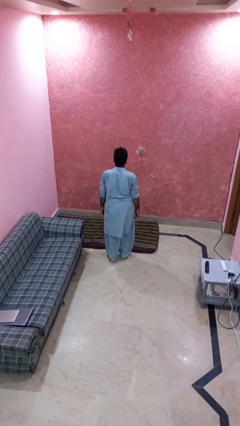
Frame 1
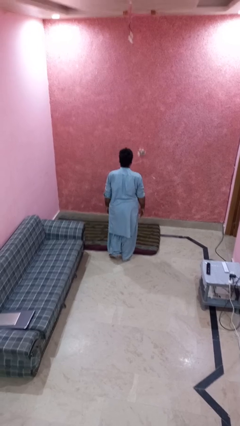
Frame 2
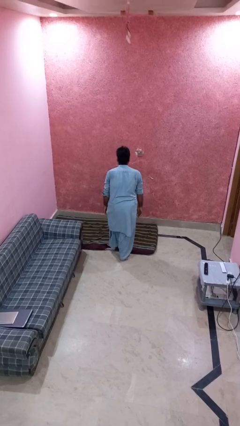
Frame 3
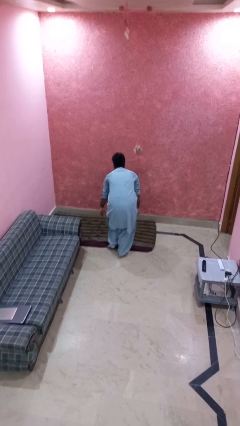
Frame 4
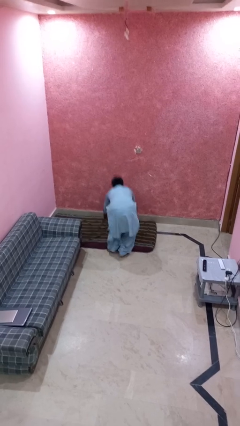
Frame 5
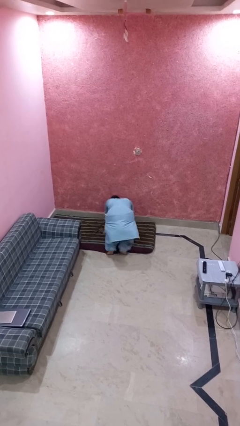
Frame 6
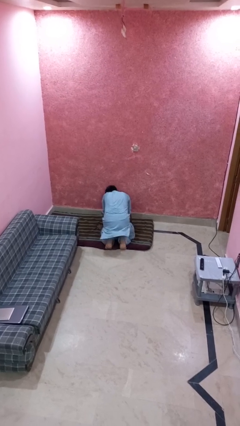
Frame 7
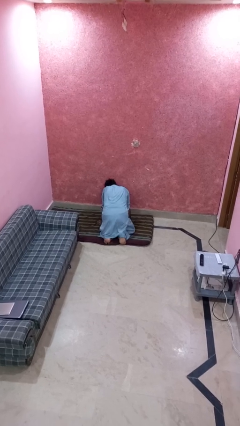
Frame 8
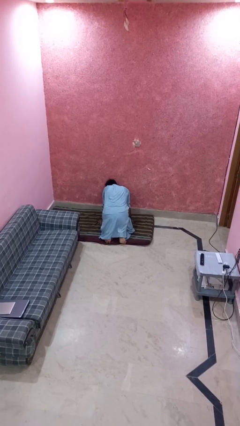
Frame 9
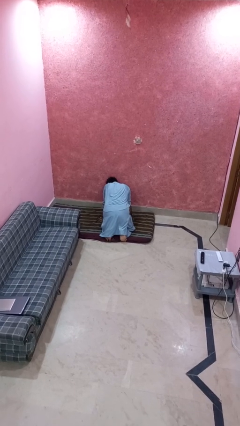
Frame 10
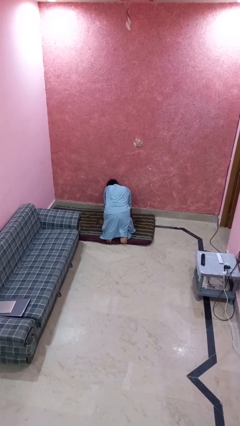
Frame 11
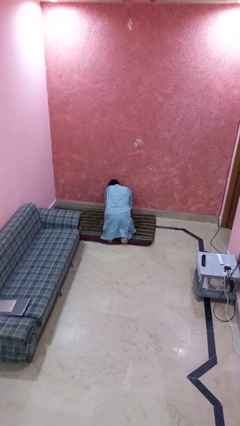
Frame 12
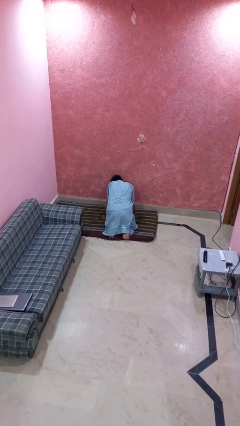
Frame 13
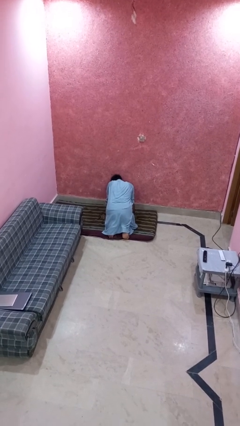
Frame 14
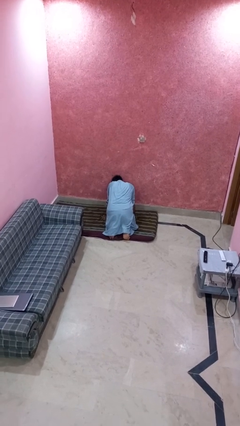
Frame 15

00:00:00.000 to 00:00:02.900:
person trips on object on floor

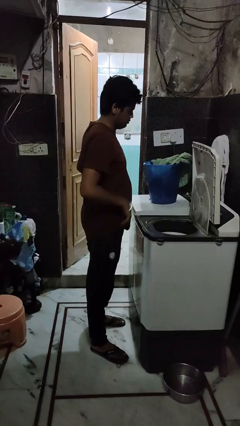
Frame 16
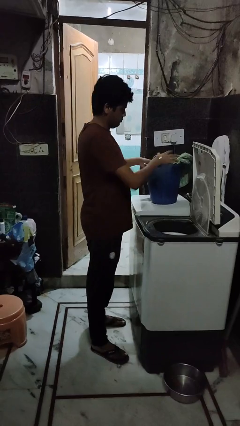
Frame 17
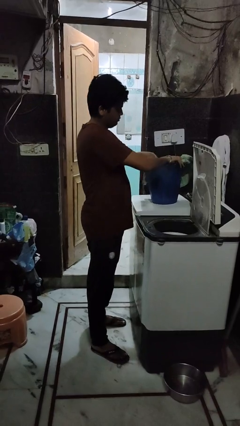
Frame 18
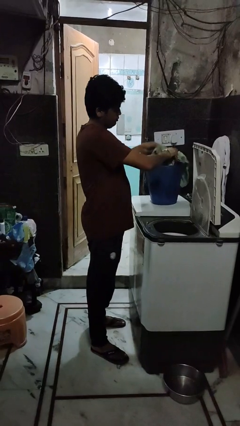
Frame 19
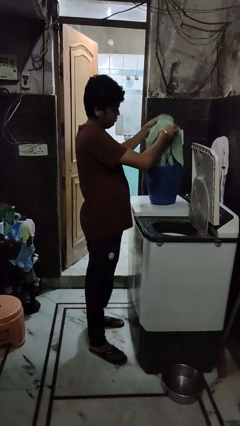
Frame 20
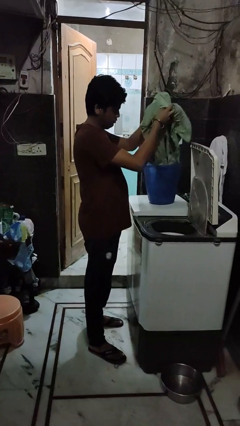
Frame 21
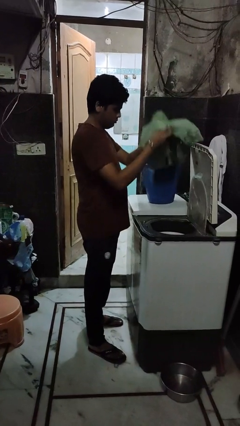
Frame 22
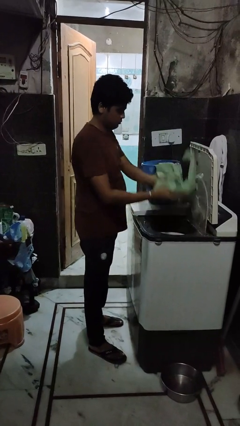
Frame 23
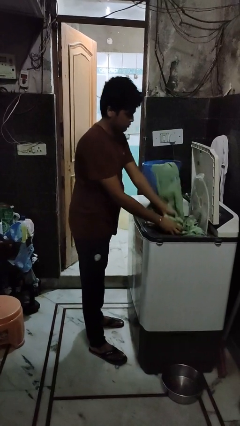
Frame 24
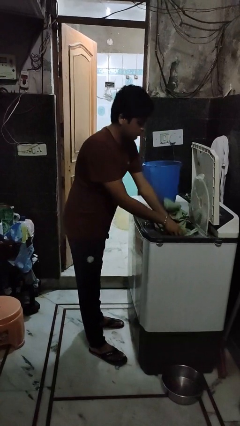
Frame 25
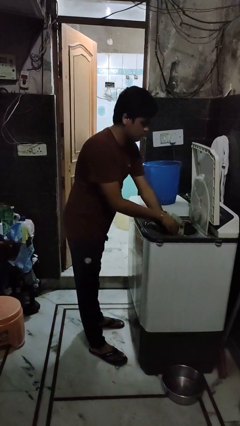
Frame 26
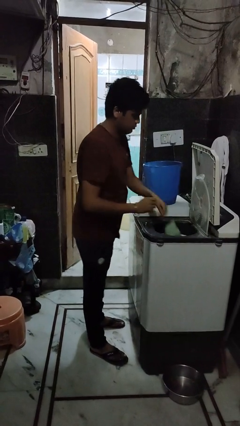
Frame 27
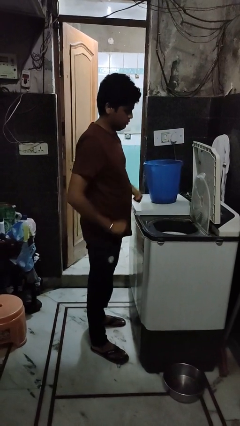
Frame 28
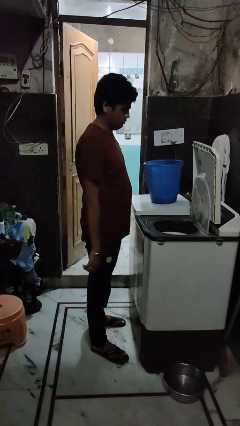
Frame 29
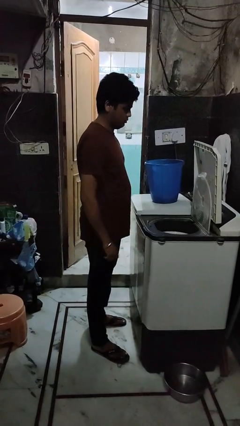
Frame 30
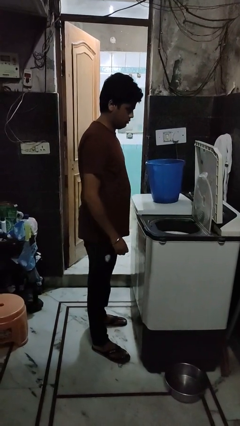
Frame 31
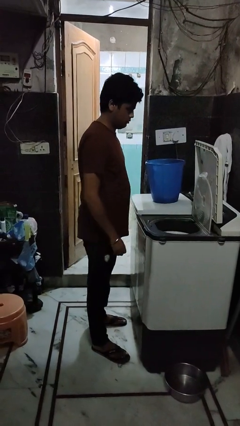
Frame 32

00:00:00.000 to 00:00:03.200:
person loads dryer

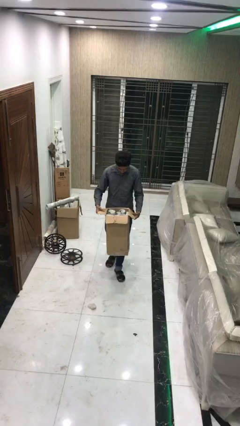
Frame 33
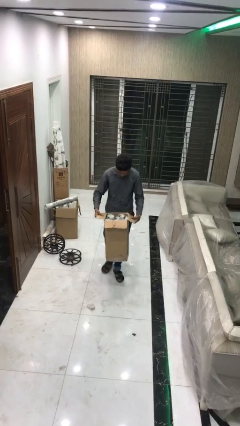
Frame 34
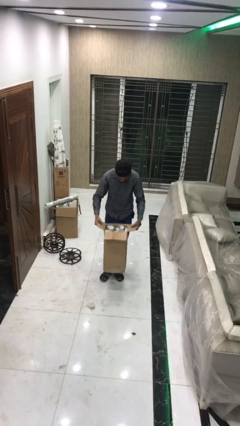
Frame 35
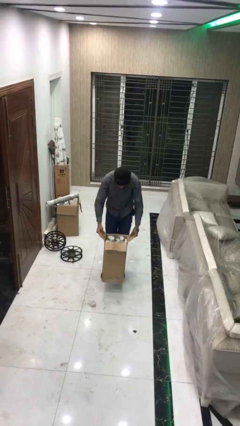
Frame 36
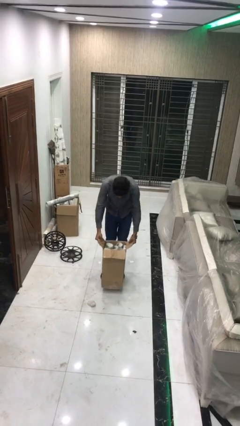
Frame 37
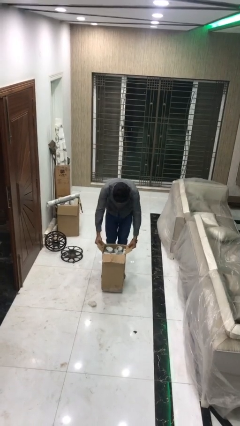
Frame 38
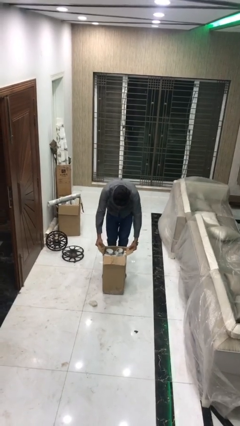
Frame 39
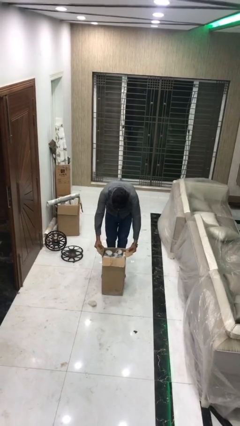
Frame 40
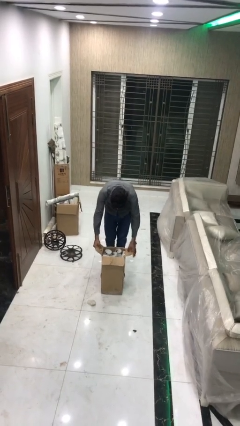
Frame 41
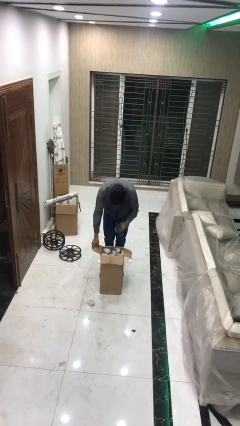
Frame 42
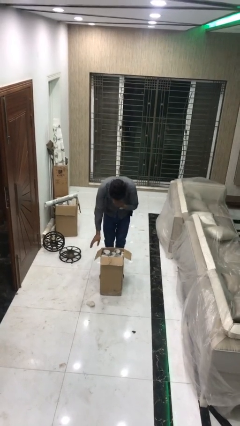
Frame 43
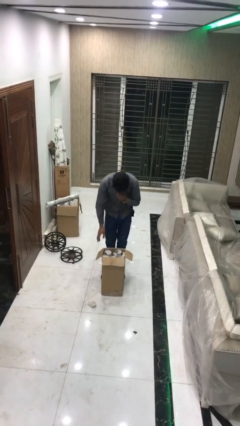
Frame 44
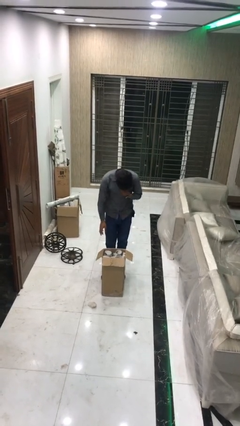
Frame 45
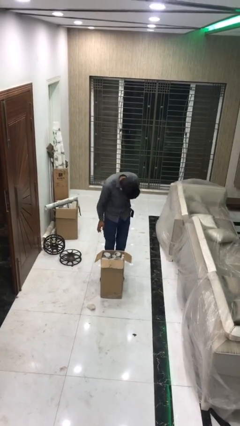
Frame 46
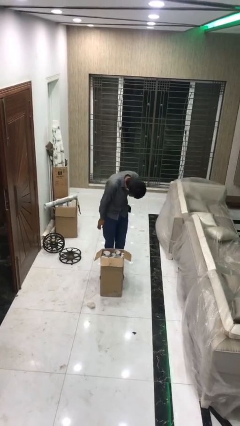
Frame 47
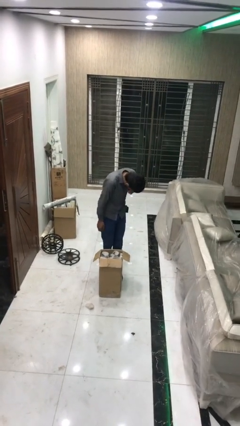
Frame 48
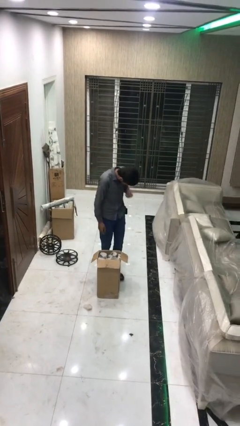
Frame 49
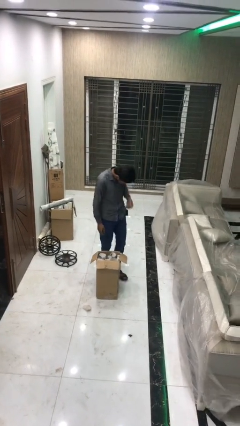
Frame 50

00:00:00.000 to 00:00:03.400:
person puts down object on floor

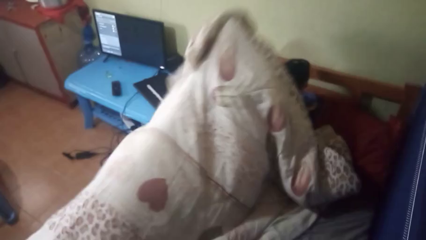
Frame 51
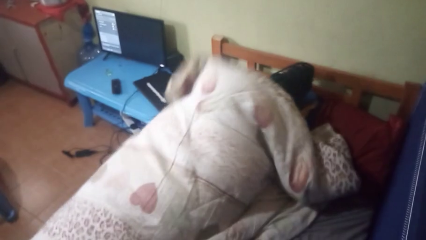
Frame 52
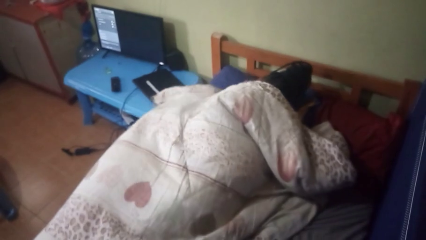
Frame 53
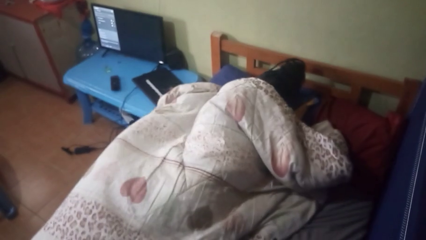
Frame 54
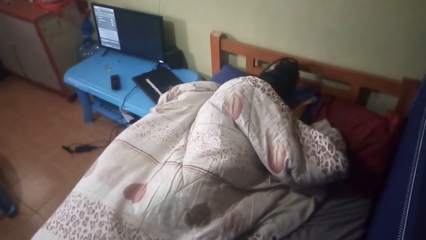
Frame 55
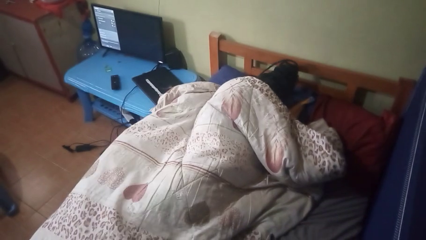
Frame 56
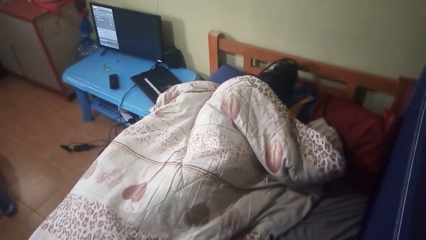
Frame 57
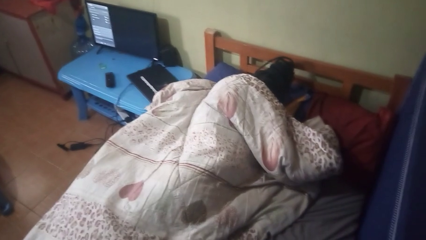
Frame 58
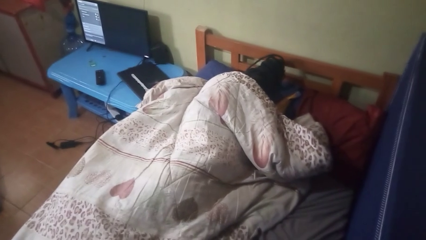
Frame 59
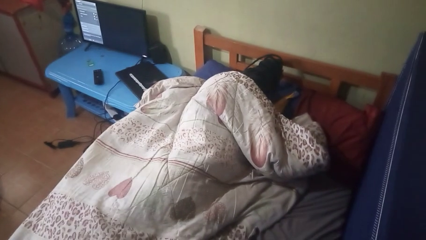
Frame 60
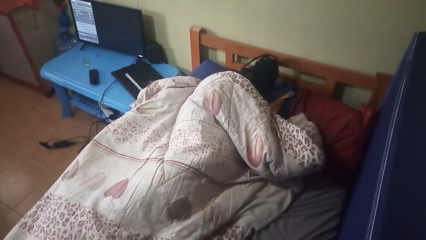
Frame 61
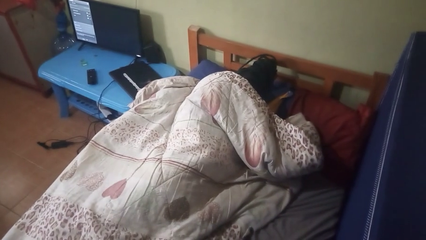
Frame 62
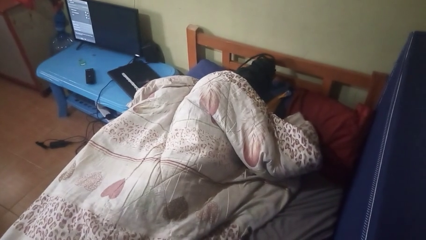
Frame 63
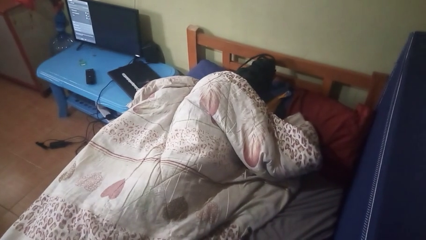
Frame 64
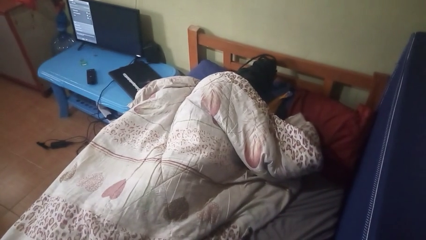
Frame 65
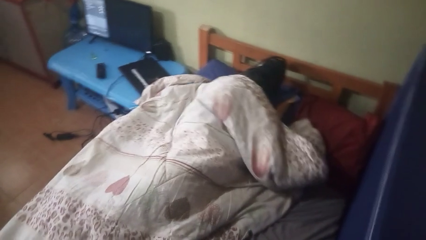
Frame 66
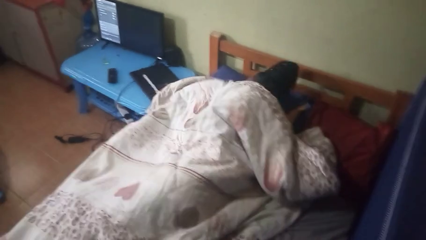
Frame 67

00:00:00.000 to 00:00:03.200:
person covers with blanket

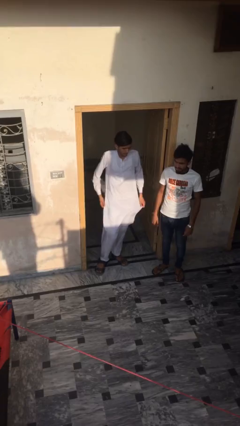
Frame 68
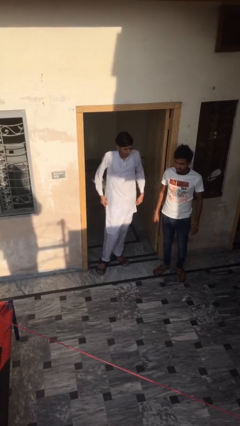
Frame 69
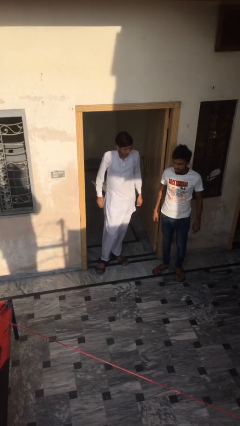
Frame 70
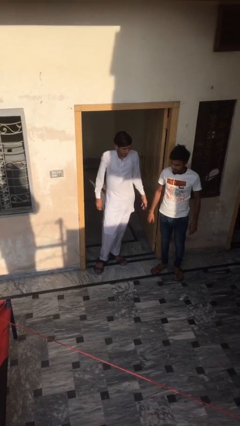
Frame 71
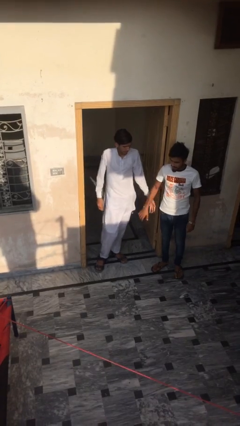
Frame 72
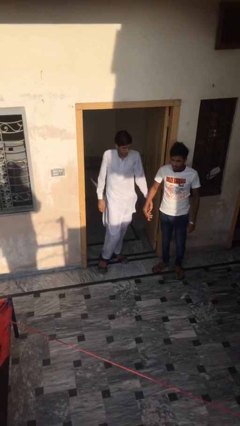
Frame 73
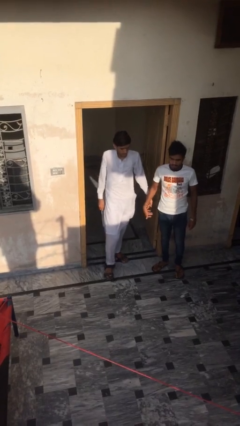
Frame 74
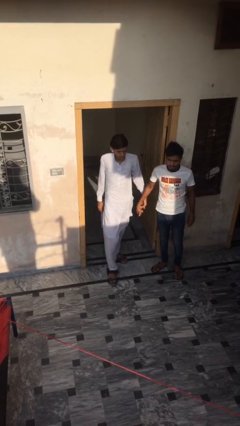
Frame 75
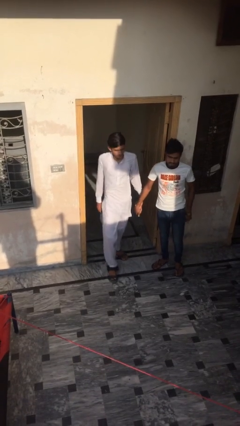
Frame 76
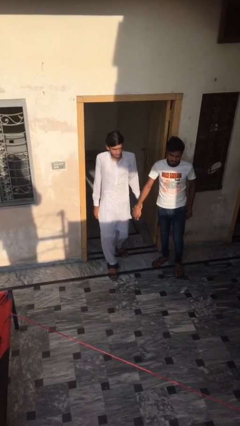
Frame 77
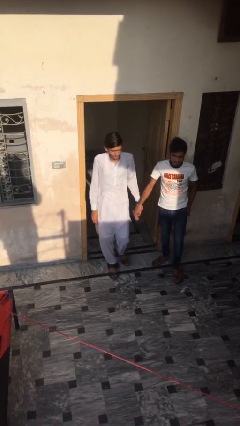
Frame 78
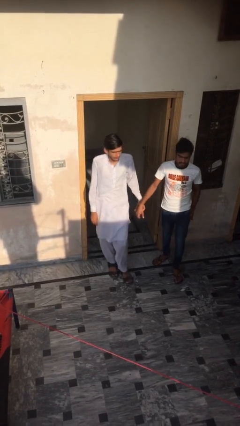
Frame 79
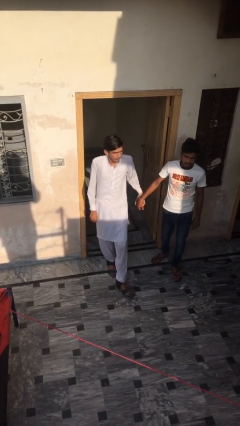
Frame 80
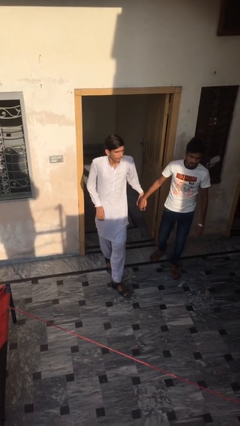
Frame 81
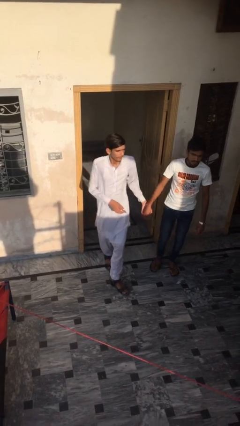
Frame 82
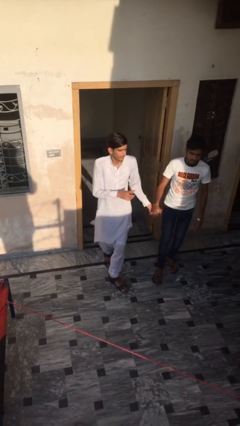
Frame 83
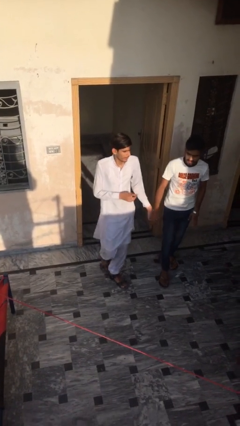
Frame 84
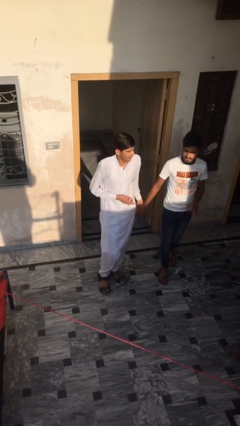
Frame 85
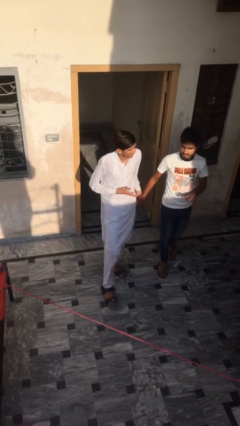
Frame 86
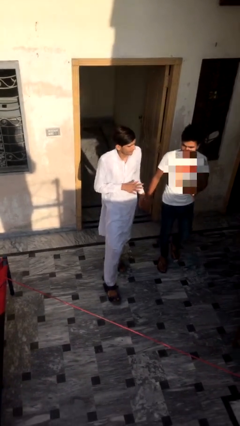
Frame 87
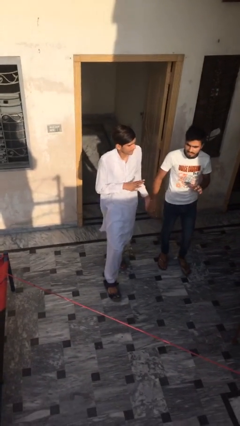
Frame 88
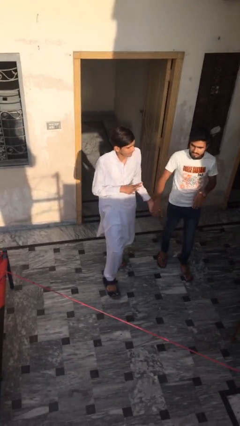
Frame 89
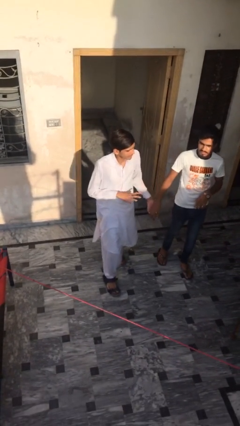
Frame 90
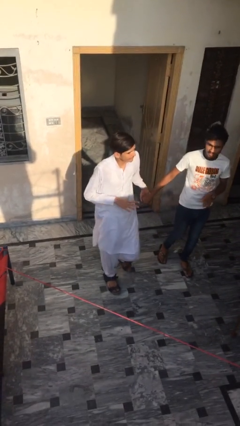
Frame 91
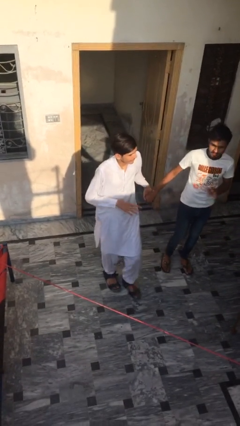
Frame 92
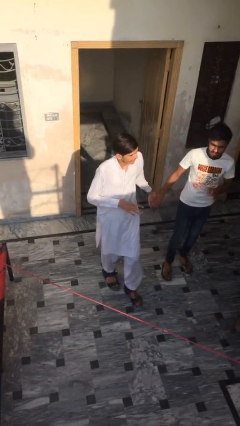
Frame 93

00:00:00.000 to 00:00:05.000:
person holds hand
